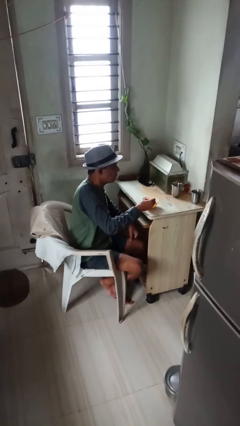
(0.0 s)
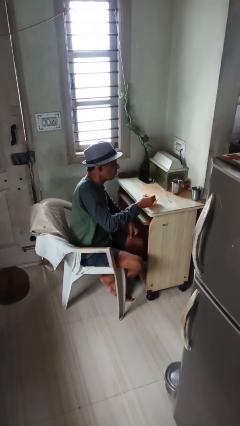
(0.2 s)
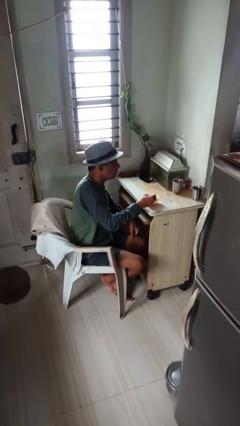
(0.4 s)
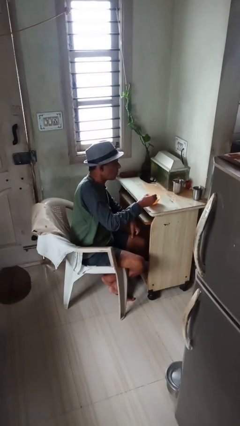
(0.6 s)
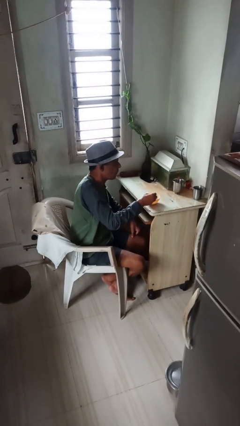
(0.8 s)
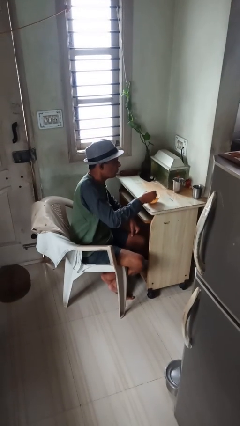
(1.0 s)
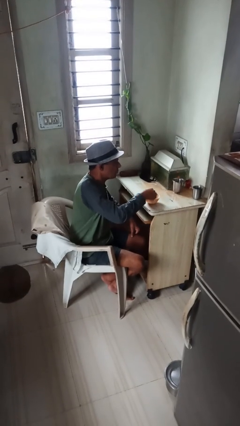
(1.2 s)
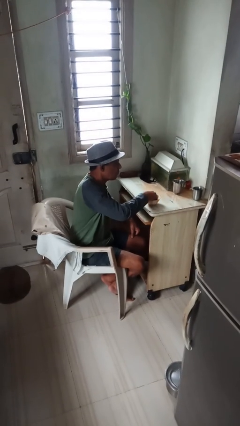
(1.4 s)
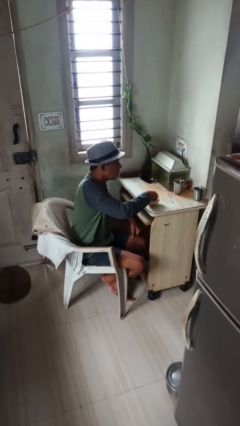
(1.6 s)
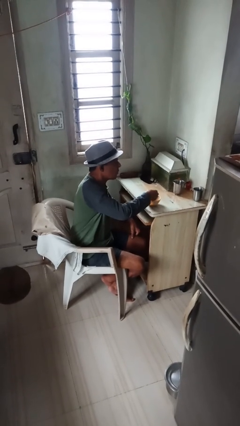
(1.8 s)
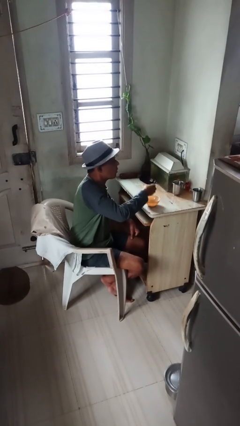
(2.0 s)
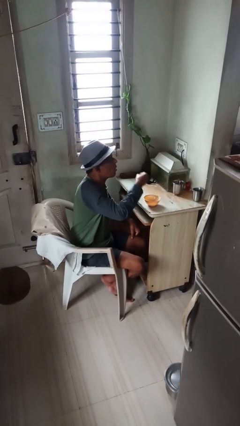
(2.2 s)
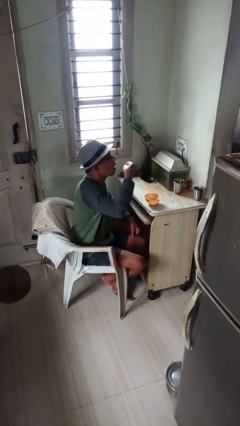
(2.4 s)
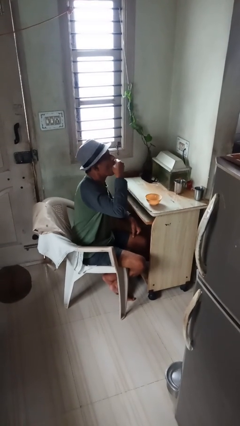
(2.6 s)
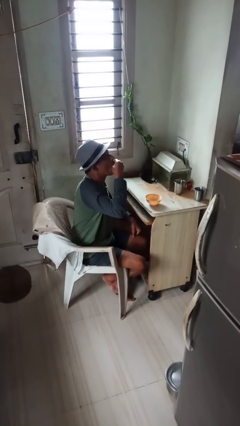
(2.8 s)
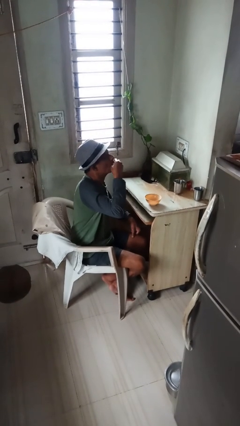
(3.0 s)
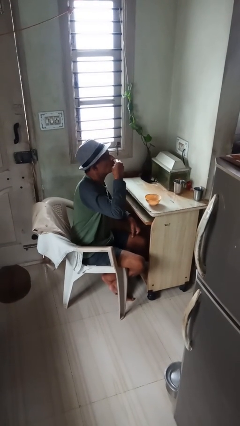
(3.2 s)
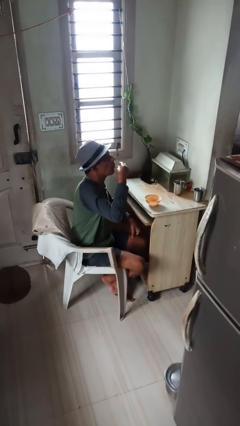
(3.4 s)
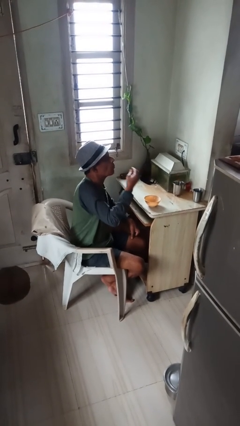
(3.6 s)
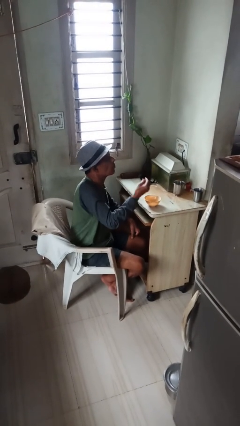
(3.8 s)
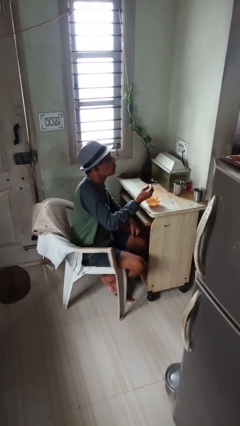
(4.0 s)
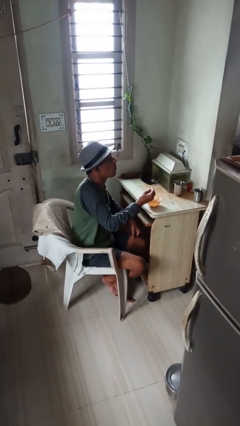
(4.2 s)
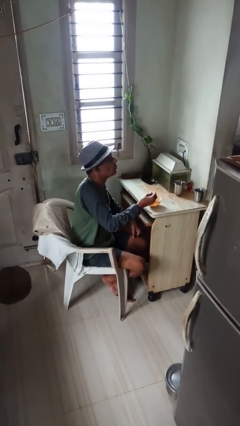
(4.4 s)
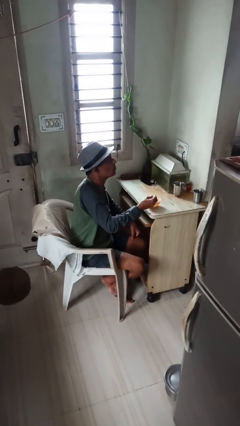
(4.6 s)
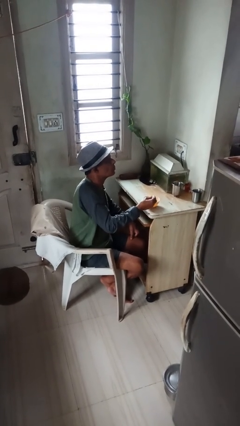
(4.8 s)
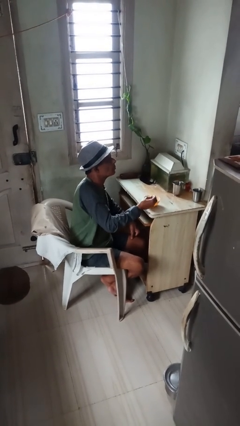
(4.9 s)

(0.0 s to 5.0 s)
person eats with hands

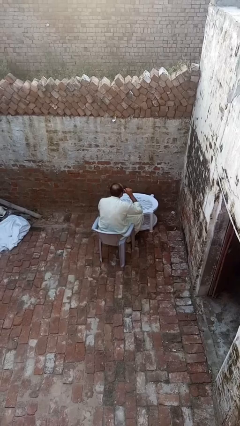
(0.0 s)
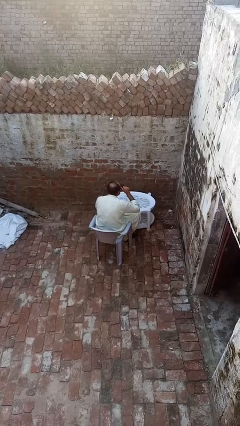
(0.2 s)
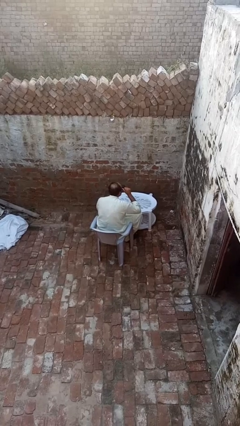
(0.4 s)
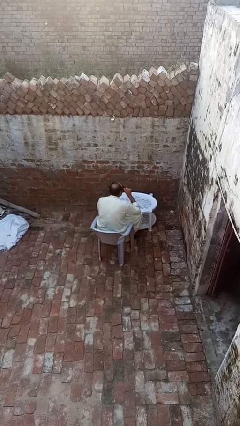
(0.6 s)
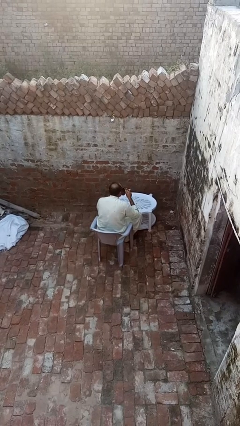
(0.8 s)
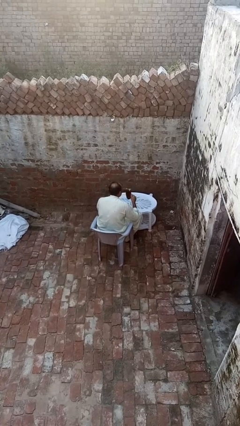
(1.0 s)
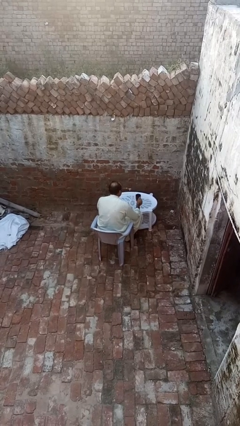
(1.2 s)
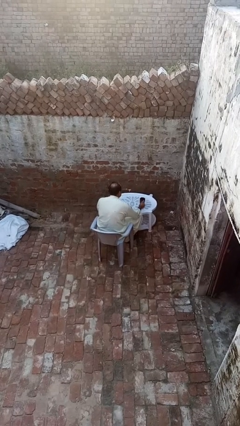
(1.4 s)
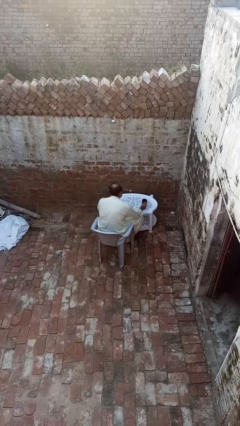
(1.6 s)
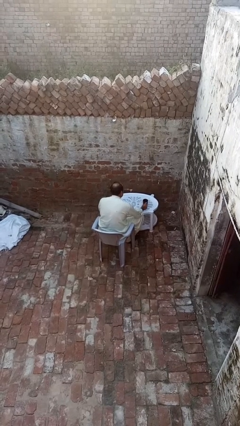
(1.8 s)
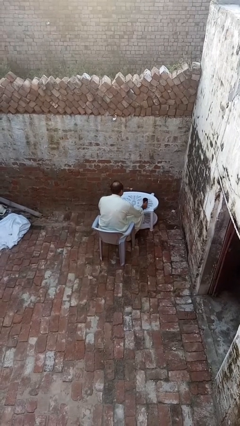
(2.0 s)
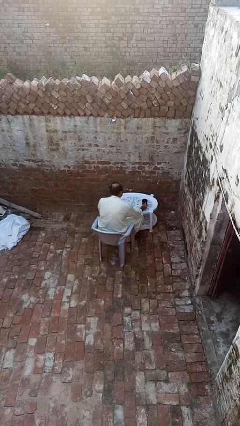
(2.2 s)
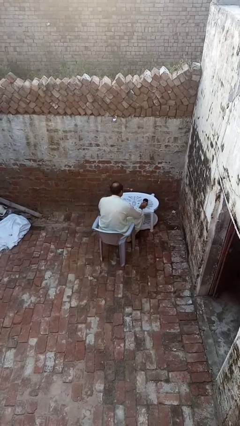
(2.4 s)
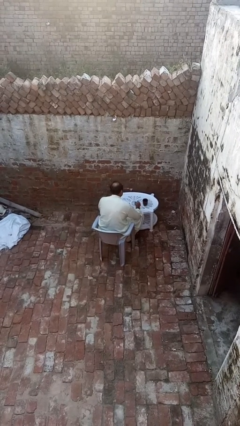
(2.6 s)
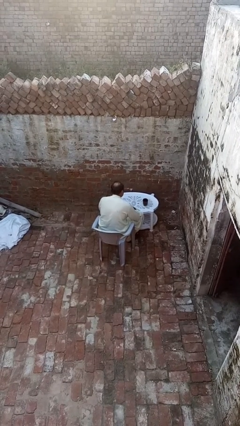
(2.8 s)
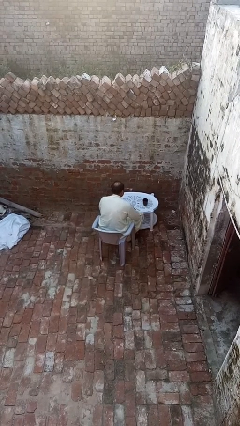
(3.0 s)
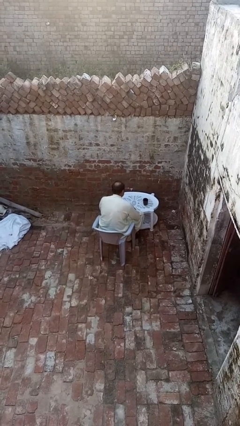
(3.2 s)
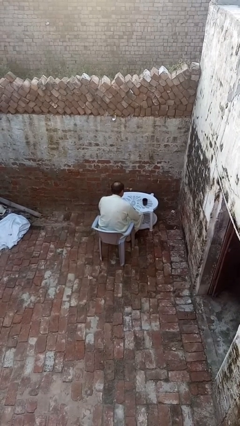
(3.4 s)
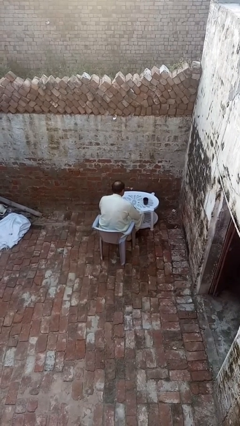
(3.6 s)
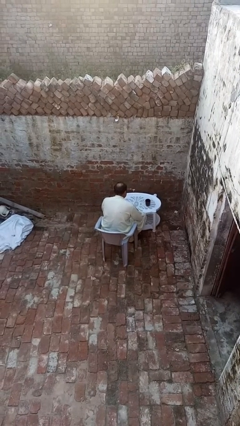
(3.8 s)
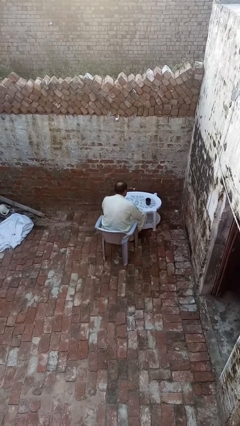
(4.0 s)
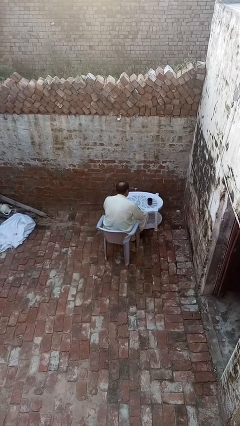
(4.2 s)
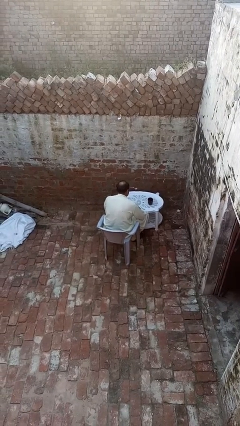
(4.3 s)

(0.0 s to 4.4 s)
person puts down object on table

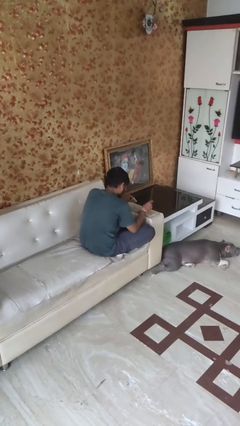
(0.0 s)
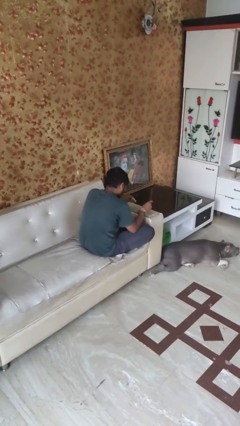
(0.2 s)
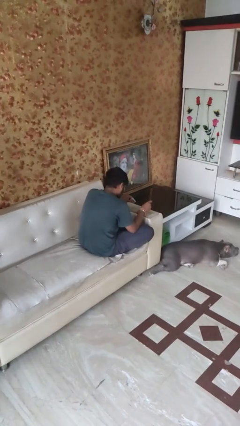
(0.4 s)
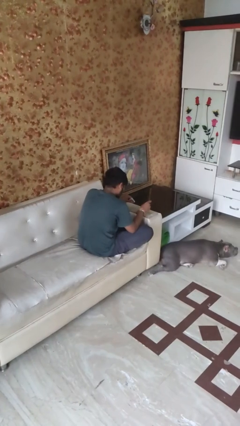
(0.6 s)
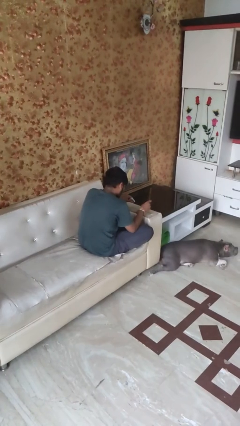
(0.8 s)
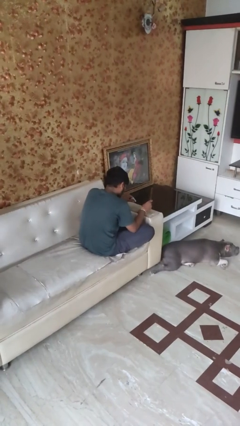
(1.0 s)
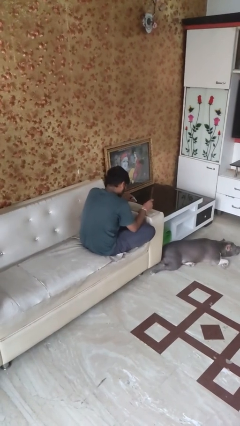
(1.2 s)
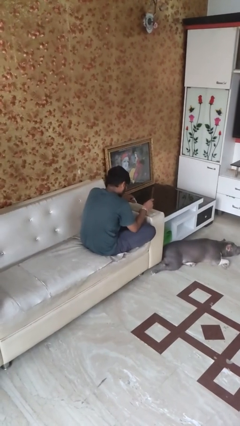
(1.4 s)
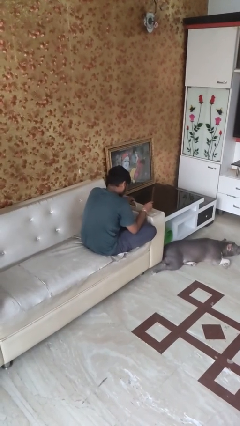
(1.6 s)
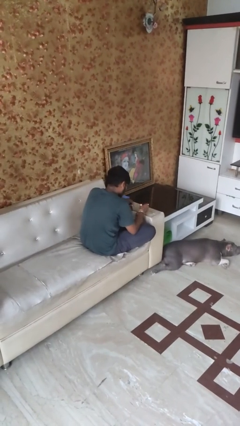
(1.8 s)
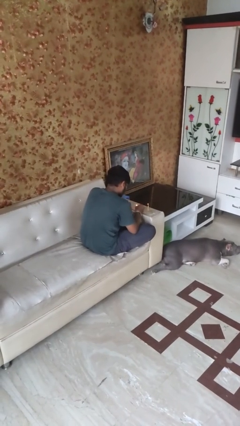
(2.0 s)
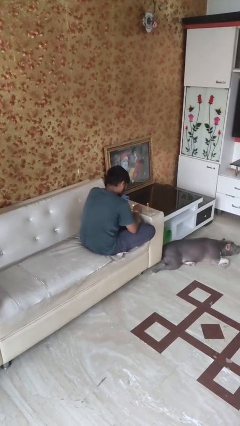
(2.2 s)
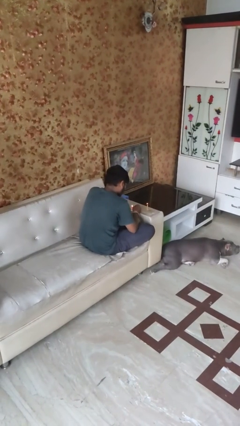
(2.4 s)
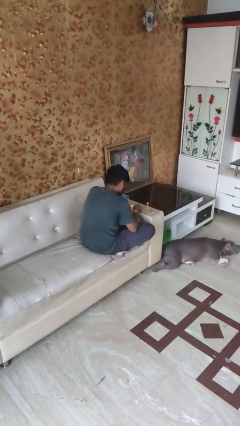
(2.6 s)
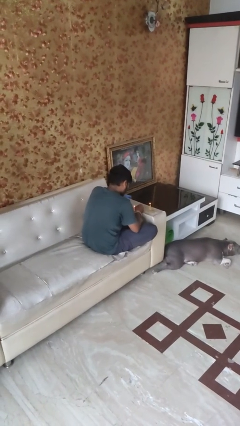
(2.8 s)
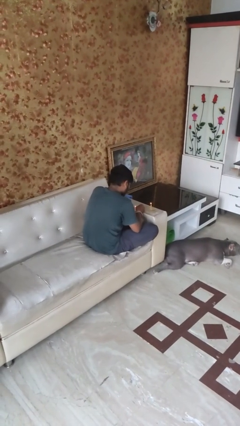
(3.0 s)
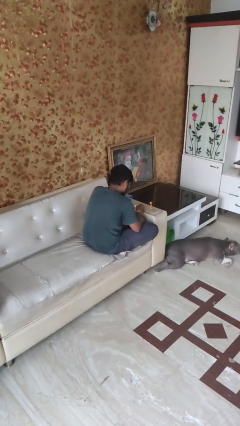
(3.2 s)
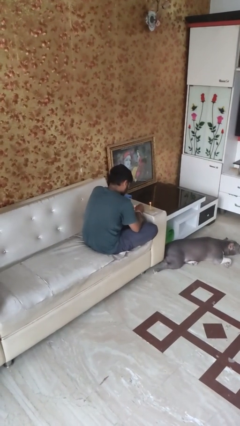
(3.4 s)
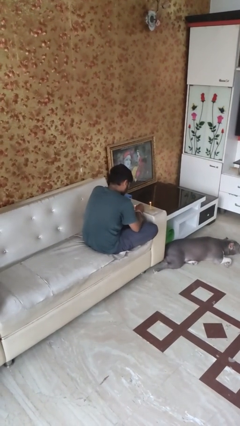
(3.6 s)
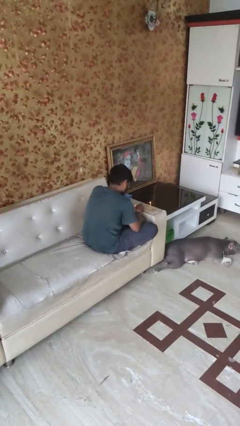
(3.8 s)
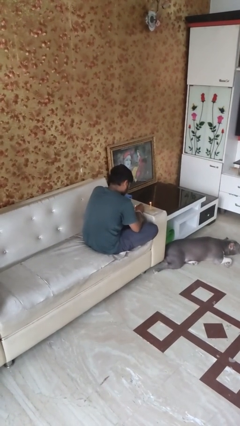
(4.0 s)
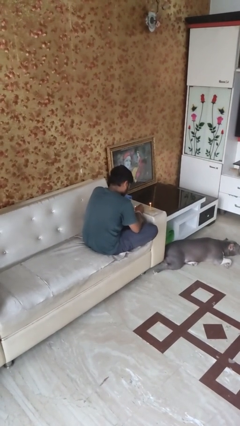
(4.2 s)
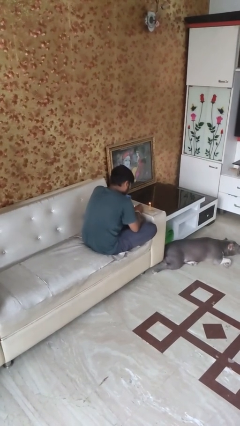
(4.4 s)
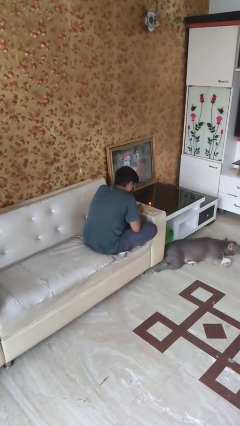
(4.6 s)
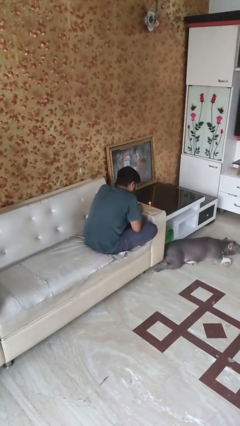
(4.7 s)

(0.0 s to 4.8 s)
person lights candle

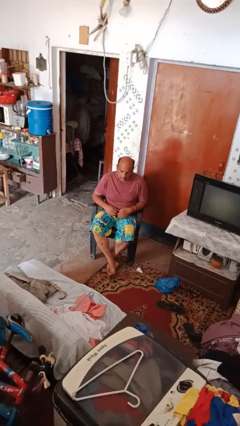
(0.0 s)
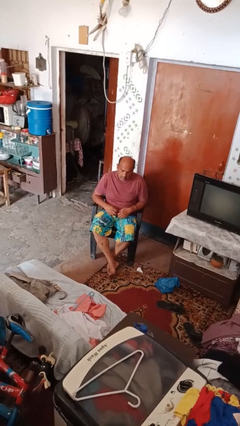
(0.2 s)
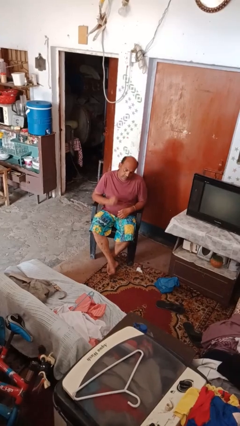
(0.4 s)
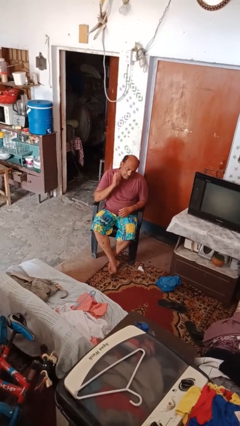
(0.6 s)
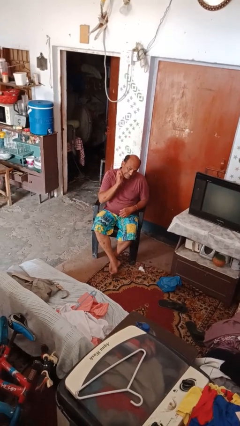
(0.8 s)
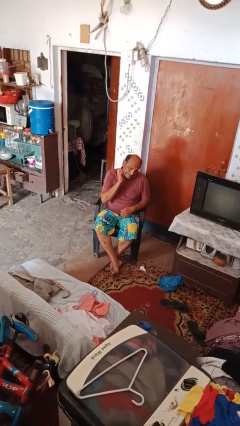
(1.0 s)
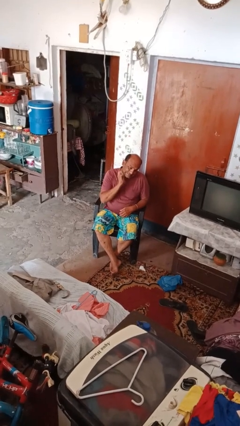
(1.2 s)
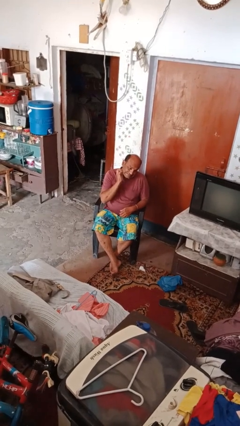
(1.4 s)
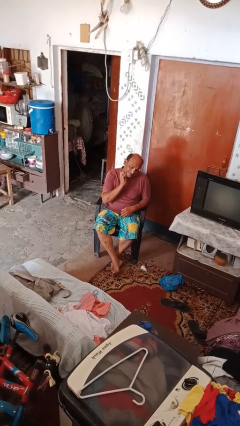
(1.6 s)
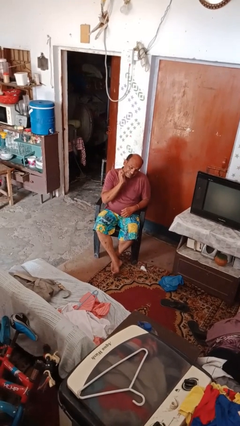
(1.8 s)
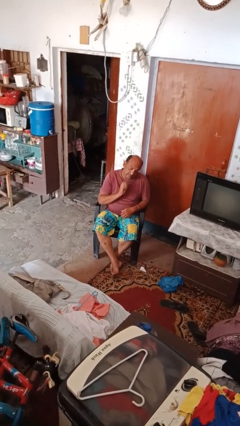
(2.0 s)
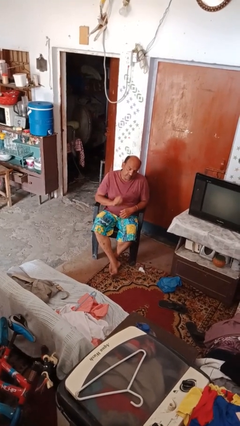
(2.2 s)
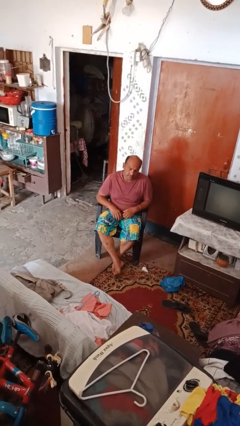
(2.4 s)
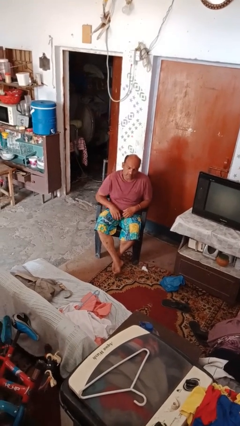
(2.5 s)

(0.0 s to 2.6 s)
person scratches face

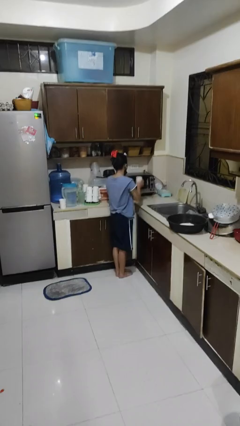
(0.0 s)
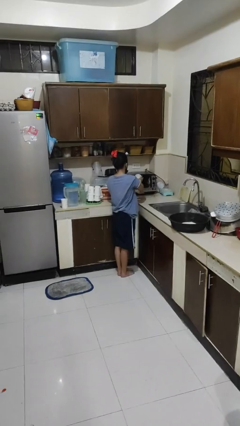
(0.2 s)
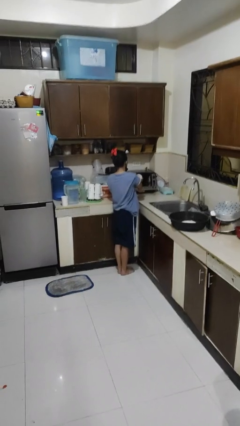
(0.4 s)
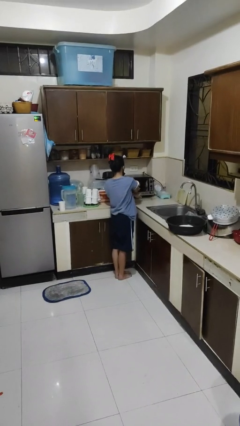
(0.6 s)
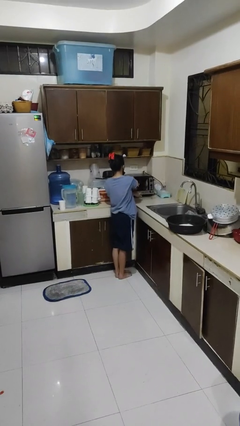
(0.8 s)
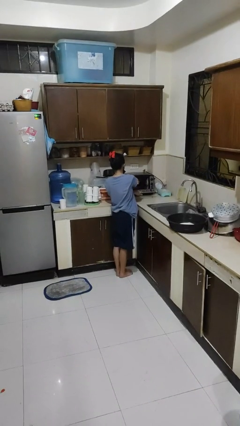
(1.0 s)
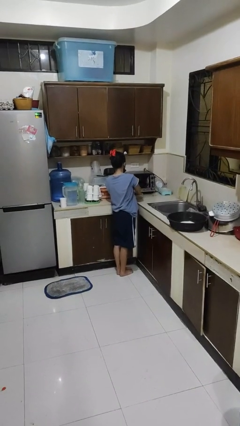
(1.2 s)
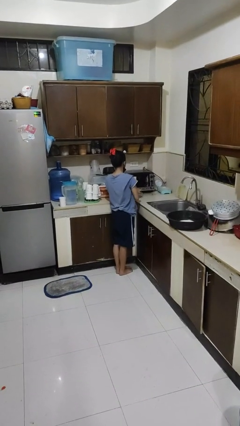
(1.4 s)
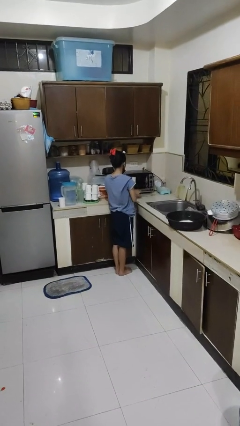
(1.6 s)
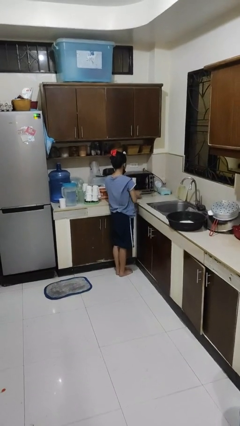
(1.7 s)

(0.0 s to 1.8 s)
person puts object into microwave
